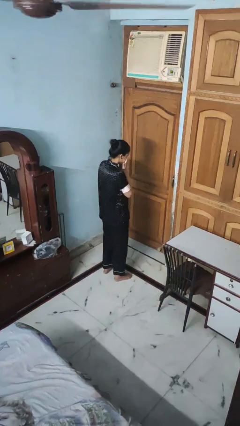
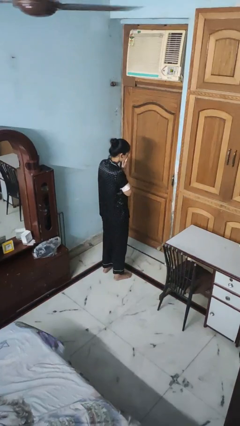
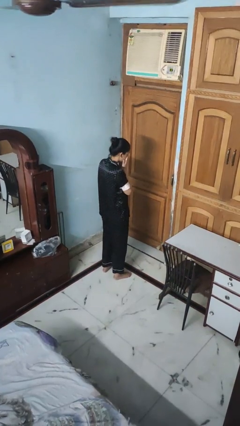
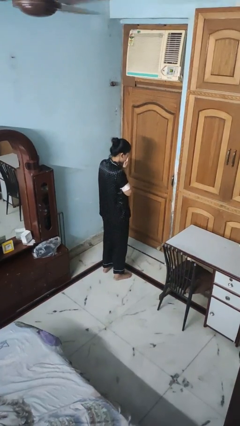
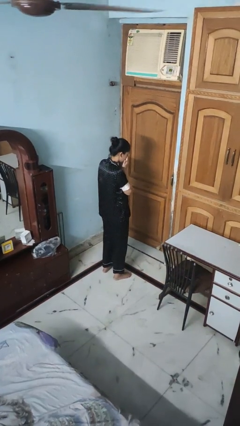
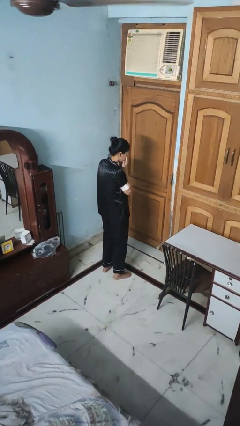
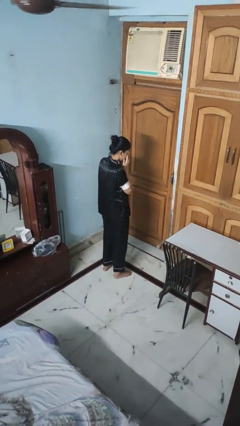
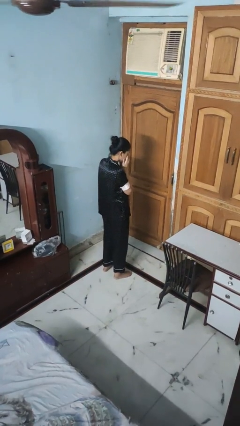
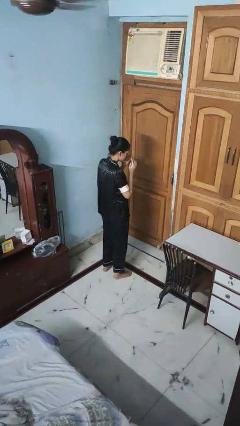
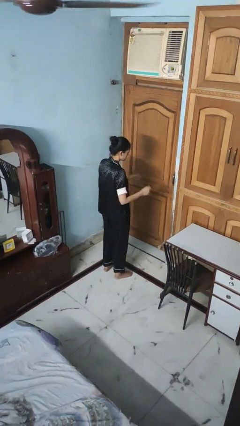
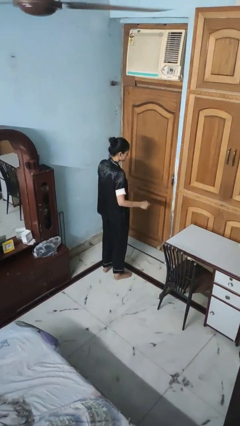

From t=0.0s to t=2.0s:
person rubs eyes

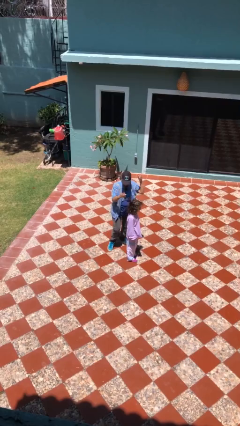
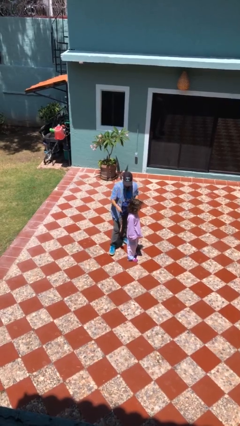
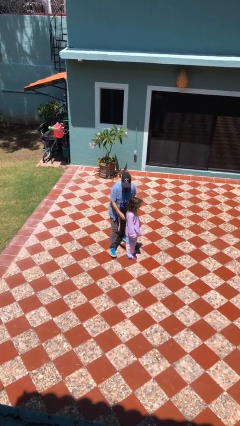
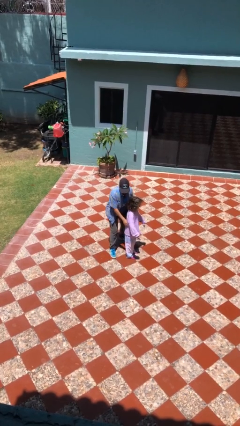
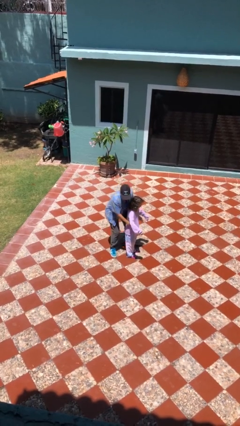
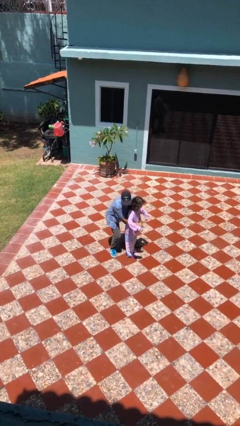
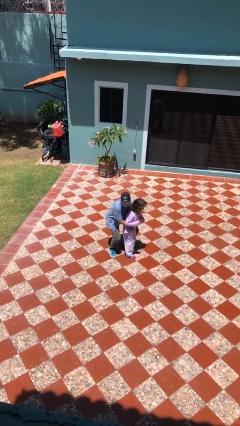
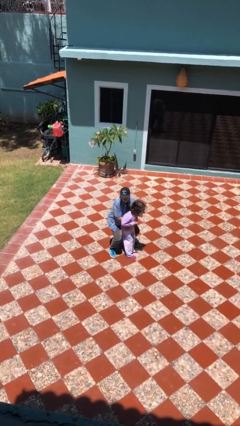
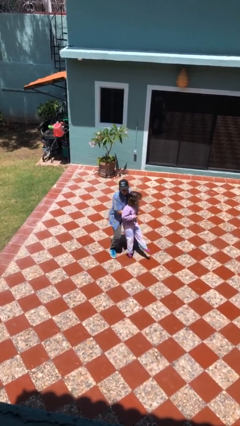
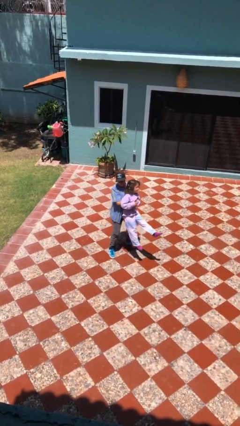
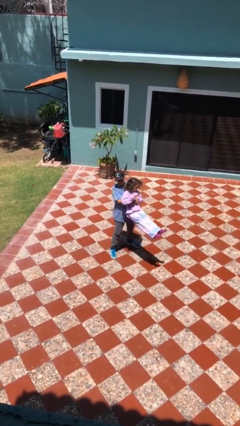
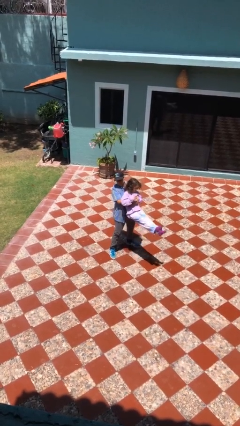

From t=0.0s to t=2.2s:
person picks up person

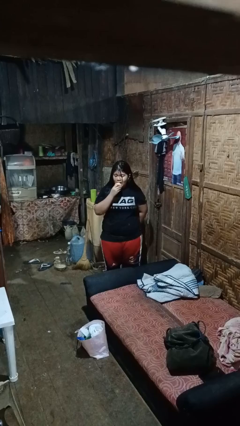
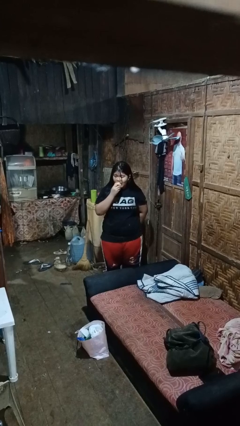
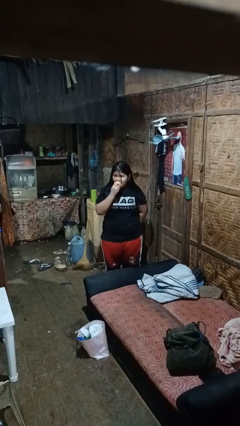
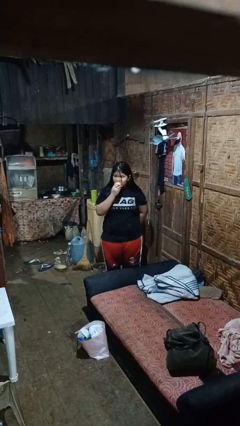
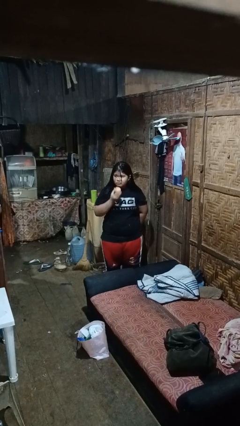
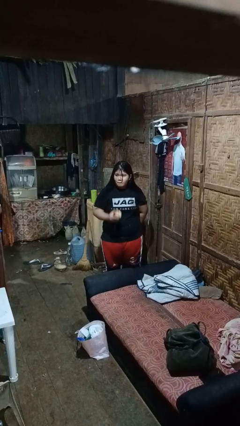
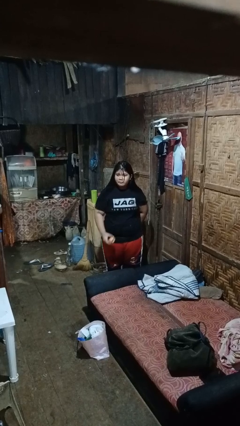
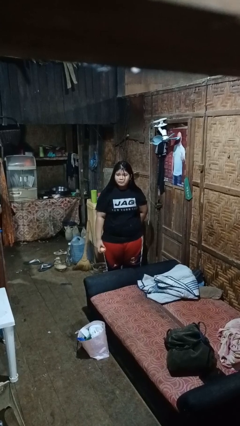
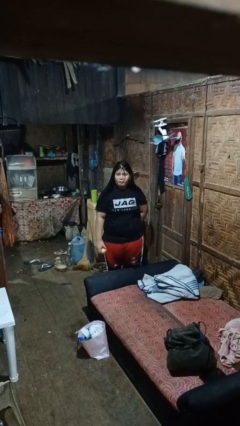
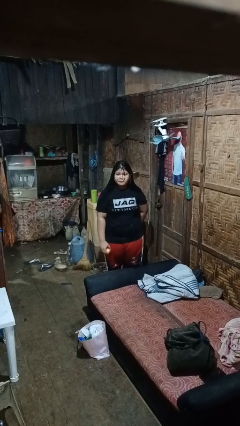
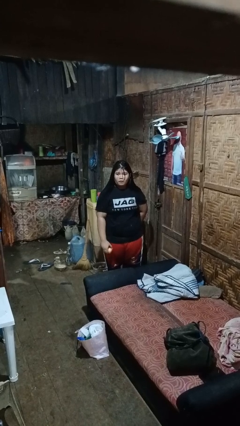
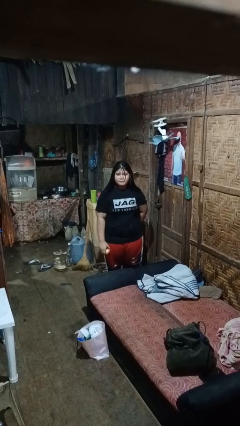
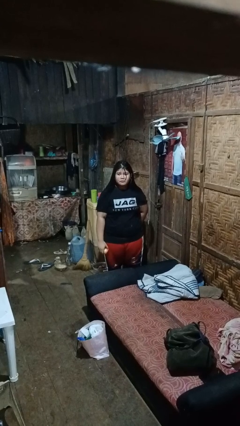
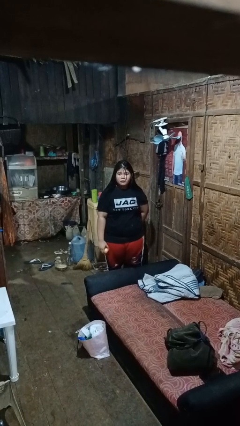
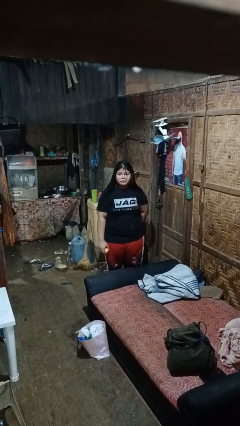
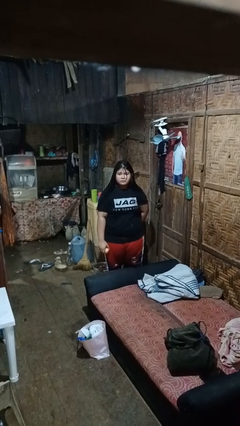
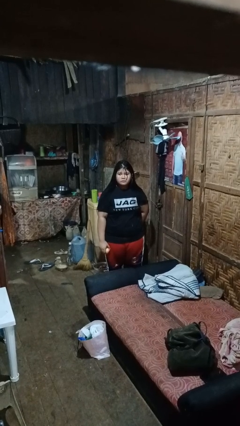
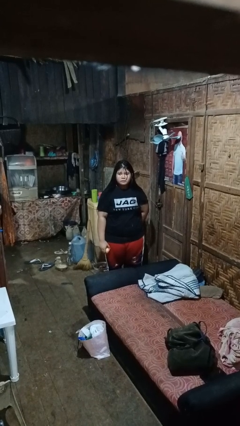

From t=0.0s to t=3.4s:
person eats apple

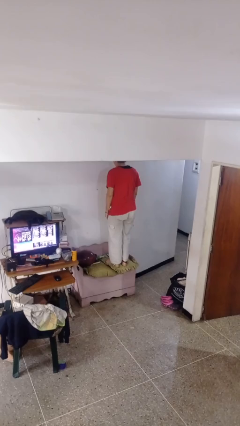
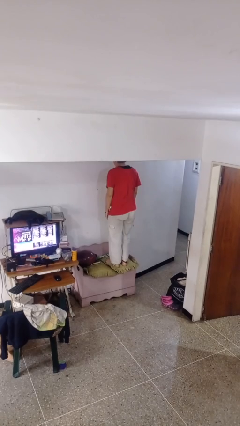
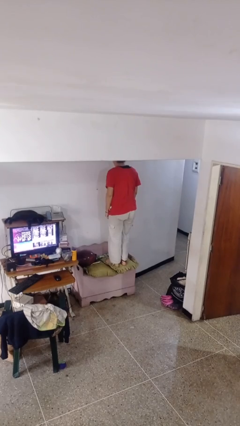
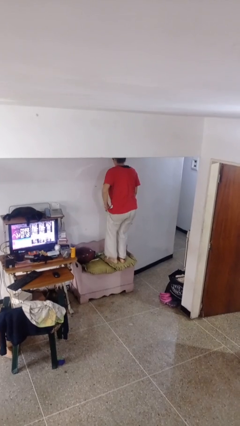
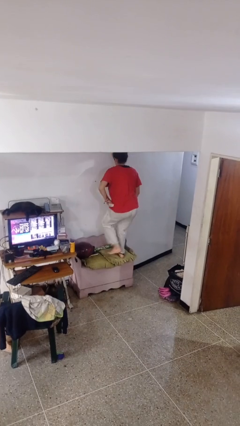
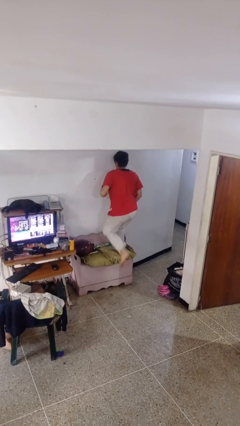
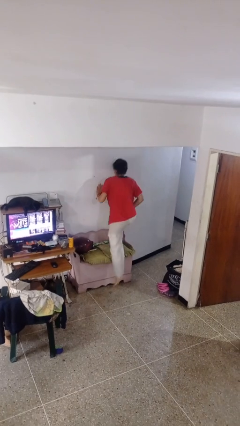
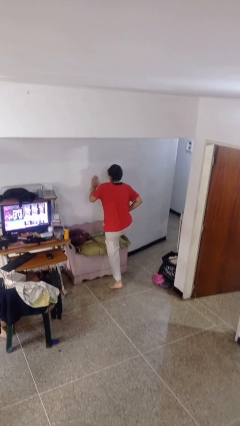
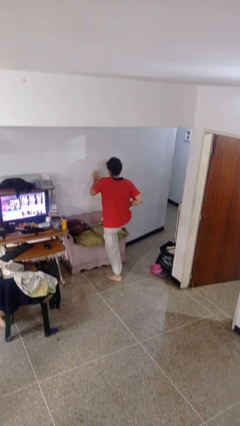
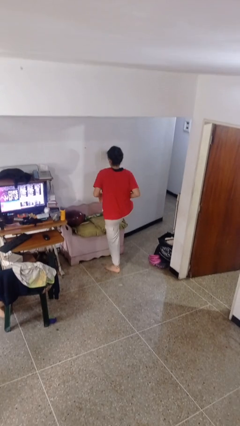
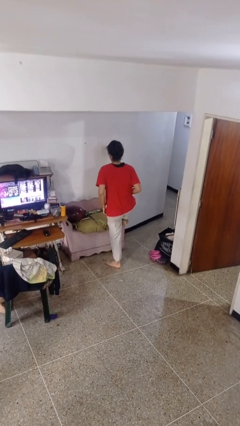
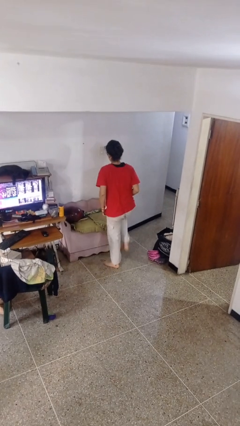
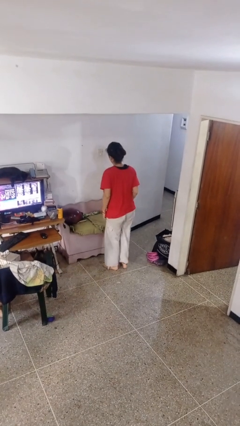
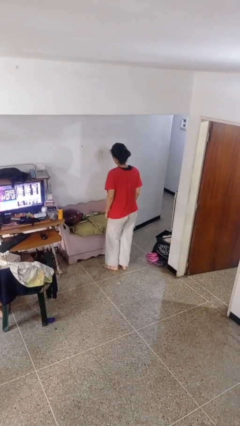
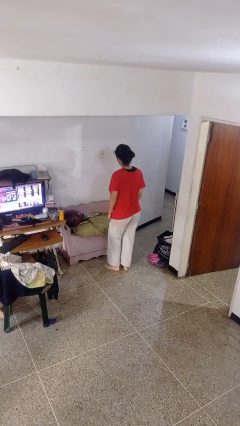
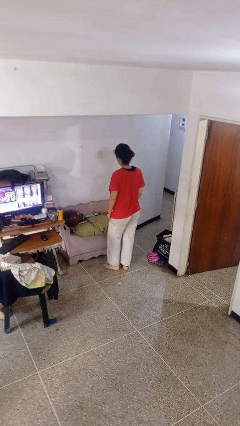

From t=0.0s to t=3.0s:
person climbs off couch

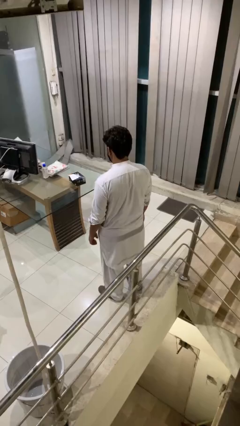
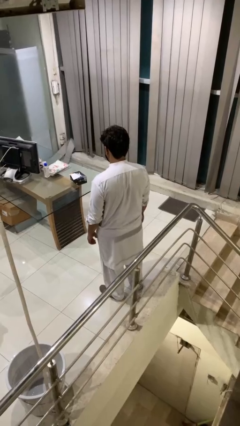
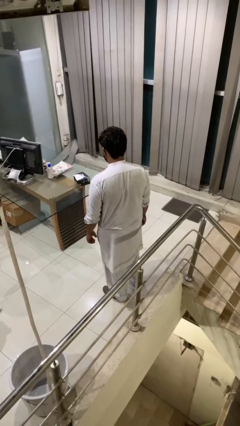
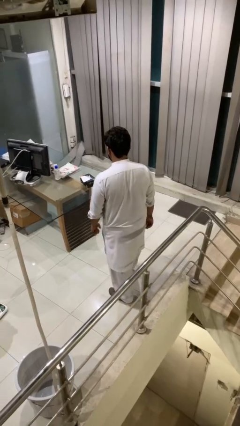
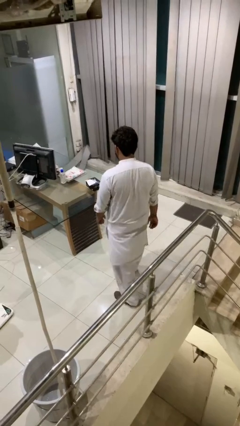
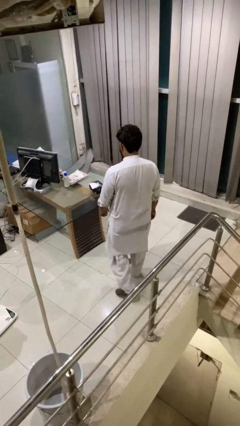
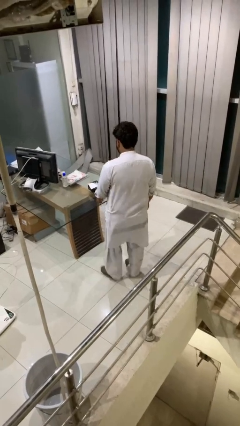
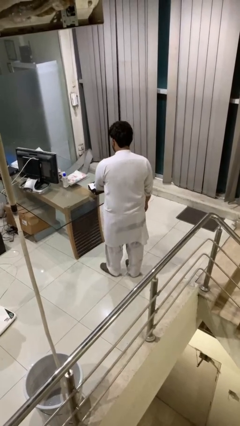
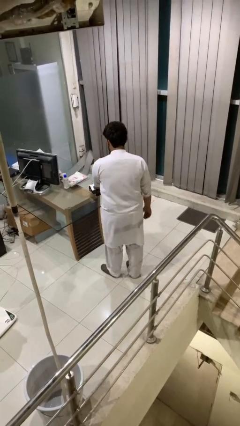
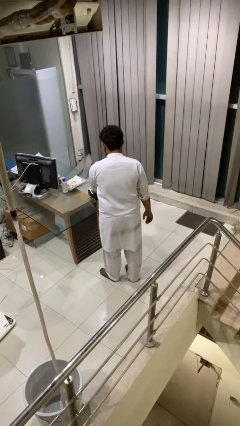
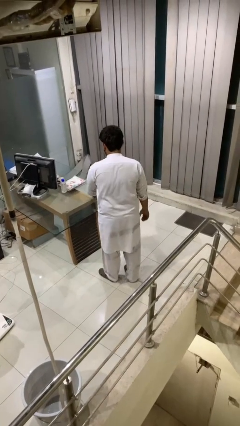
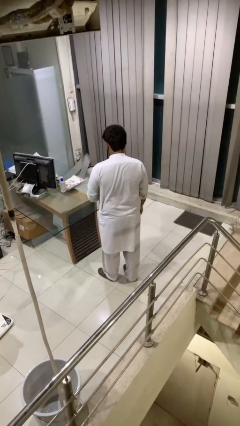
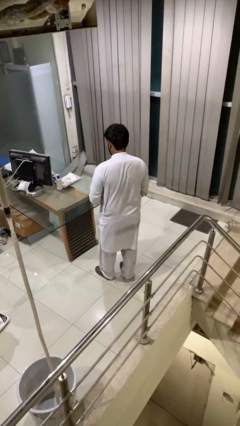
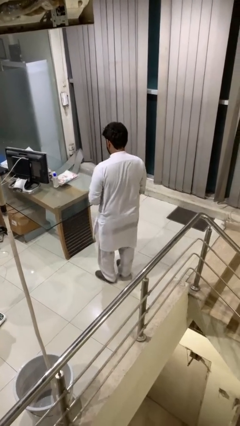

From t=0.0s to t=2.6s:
person picks up object from table

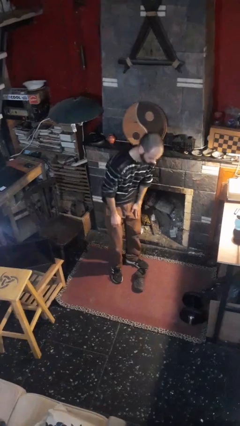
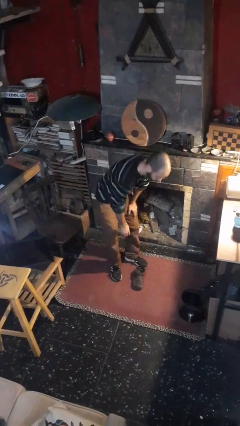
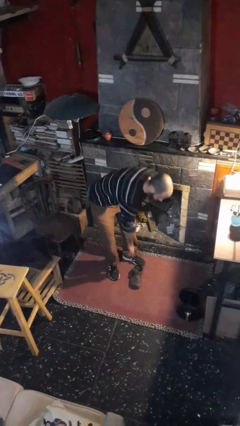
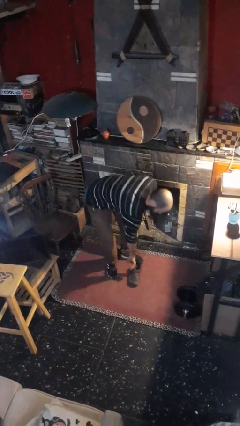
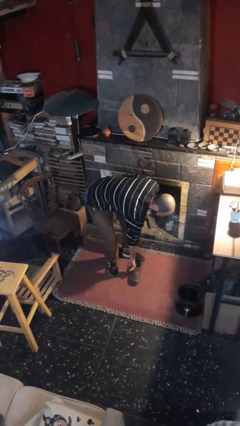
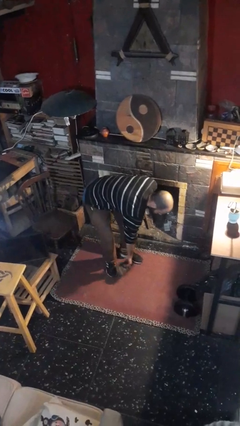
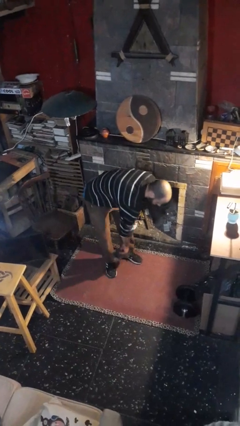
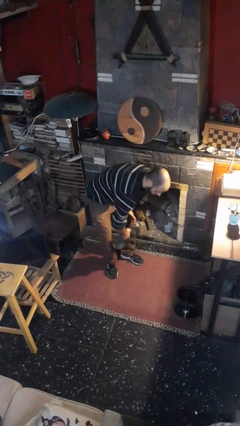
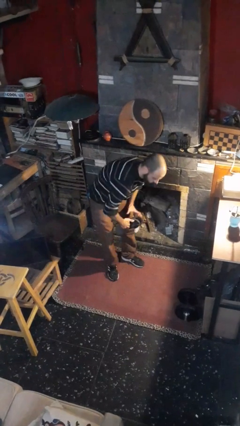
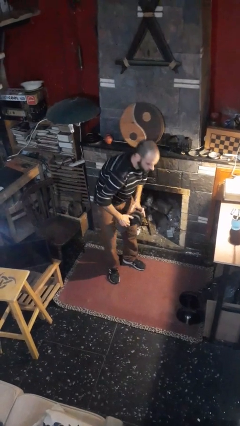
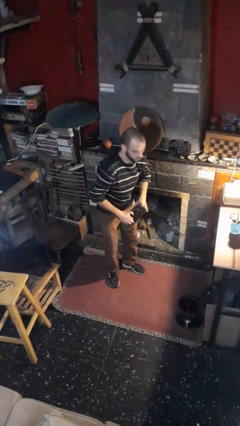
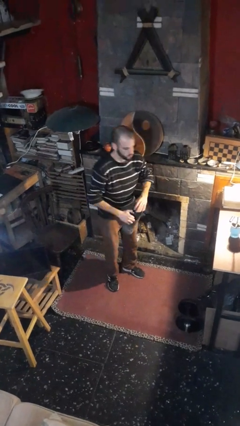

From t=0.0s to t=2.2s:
person picks up object from floor

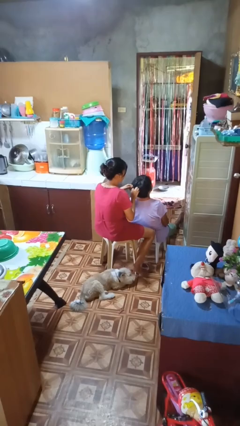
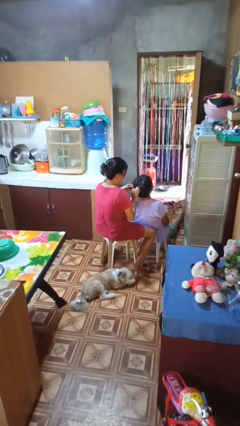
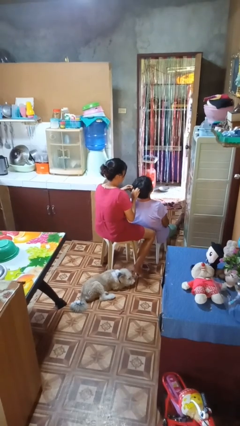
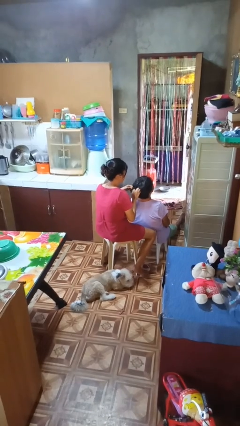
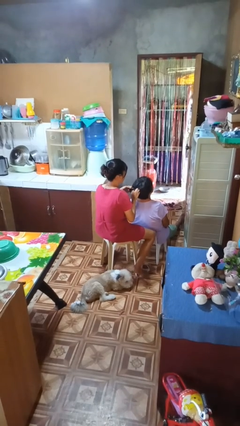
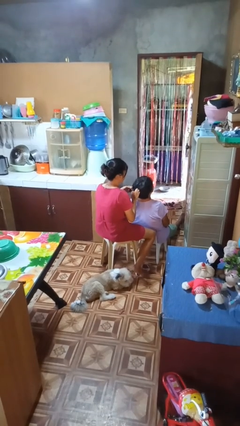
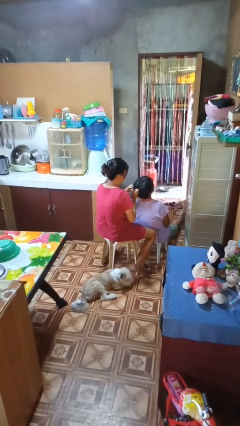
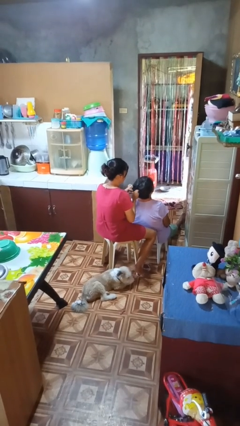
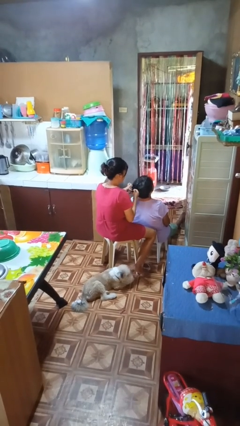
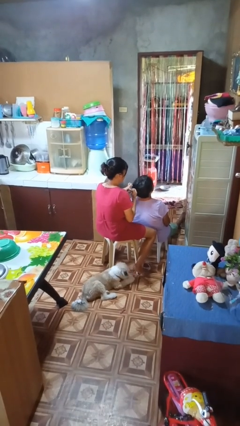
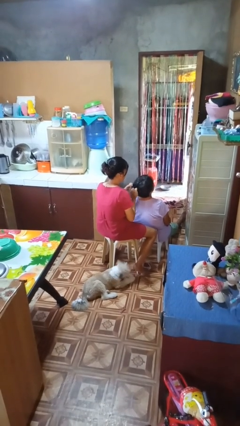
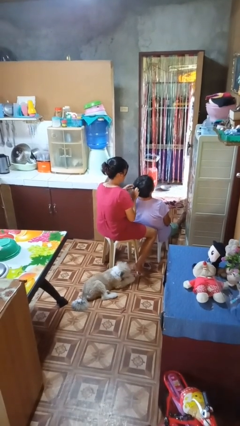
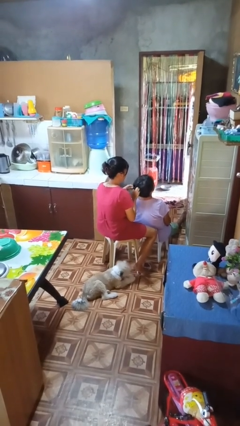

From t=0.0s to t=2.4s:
person braids hair of person
